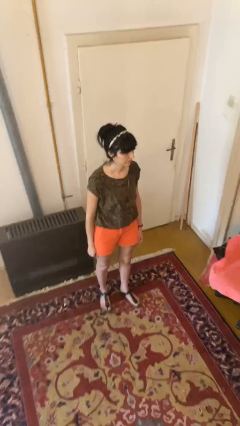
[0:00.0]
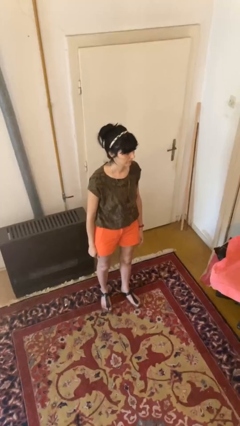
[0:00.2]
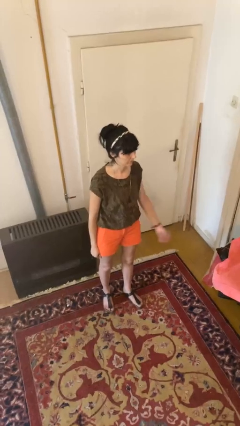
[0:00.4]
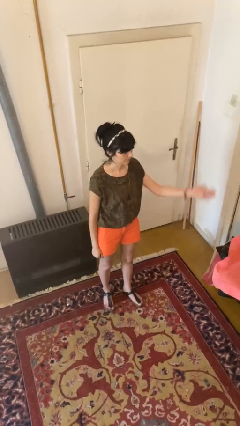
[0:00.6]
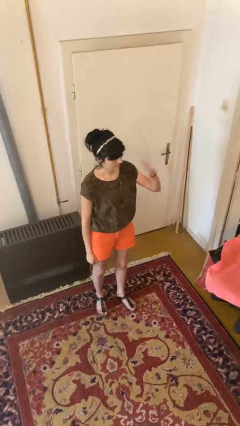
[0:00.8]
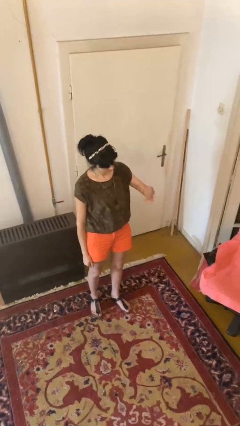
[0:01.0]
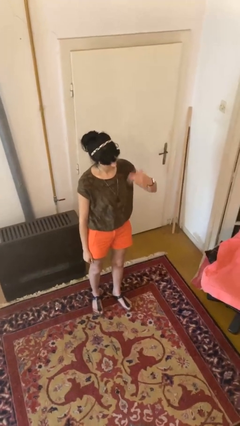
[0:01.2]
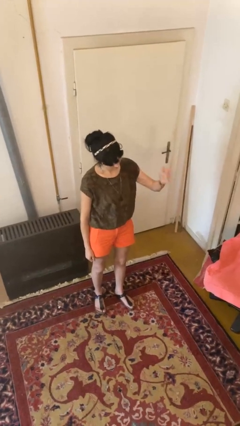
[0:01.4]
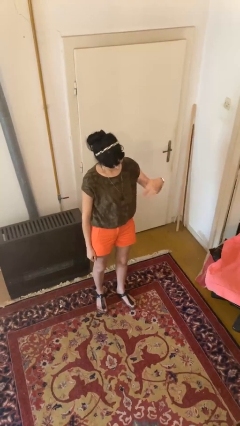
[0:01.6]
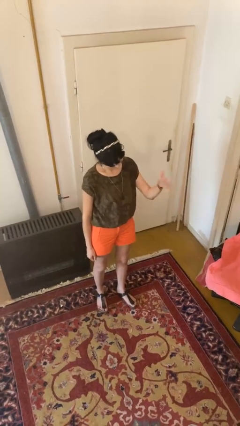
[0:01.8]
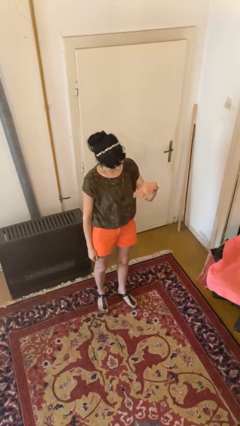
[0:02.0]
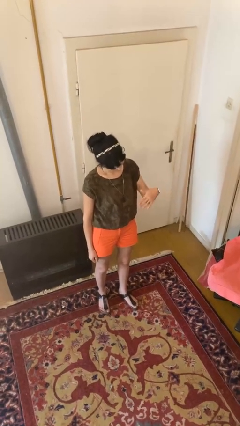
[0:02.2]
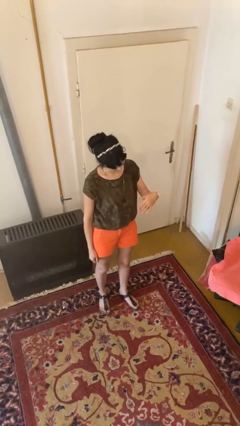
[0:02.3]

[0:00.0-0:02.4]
person gestures come here

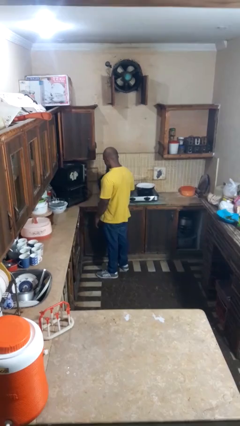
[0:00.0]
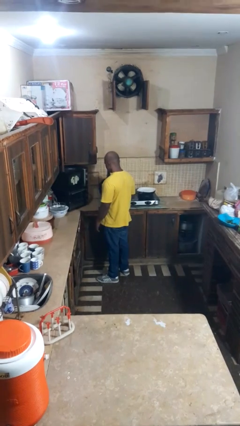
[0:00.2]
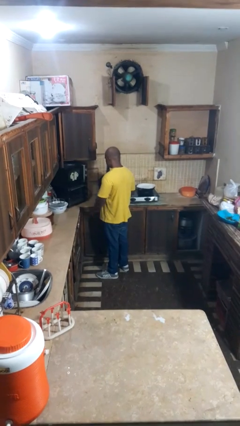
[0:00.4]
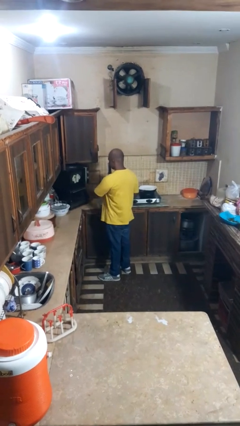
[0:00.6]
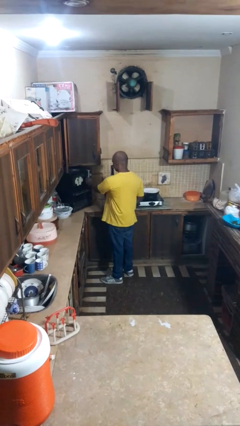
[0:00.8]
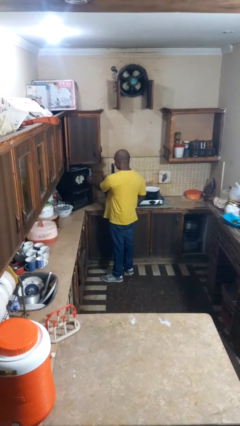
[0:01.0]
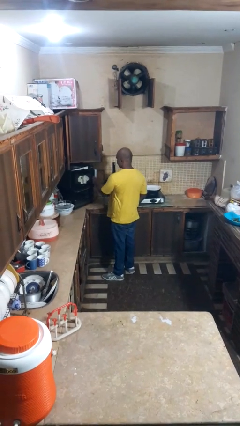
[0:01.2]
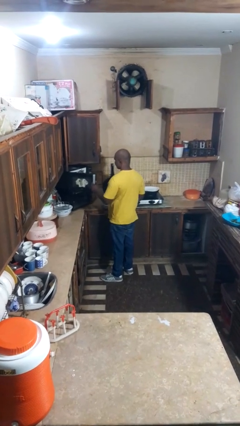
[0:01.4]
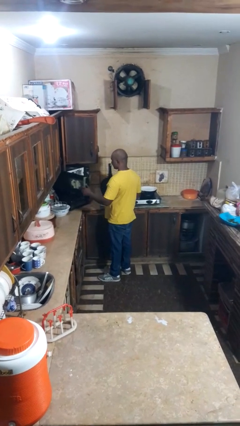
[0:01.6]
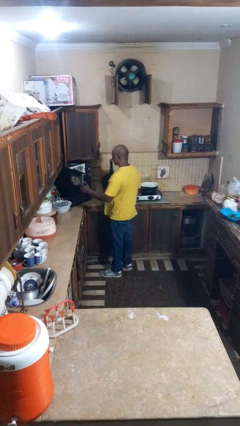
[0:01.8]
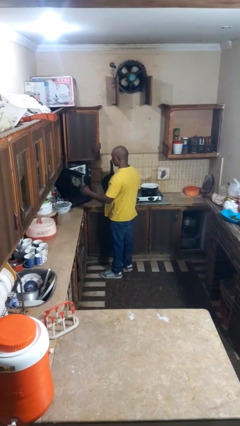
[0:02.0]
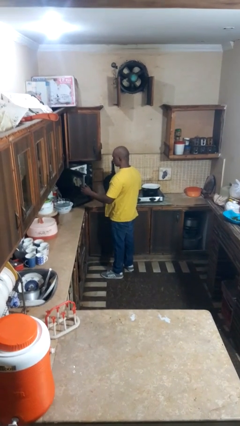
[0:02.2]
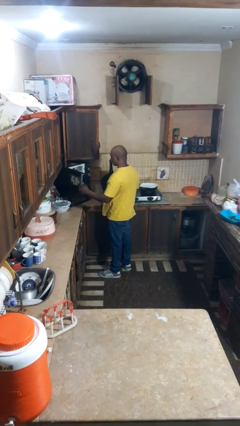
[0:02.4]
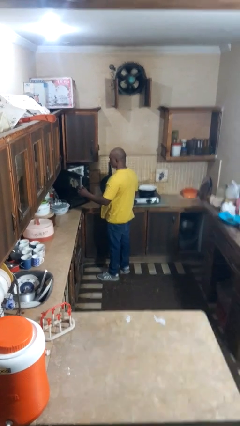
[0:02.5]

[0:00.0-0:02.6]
person opens microwave

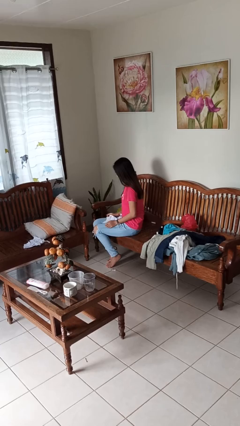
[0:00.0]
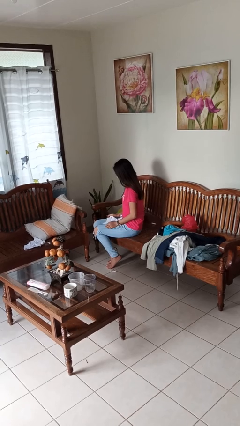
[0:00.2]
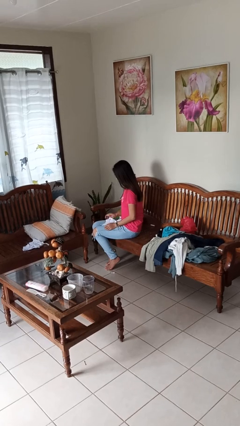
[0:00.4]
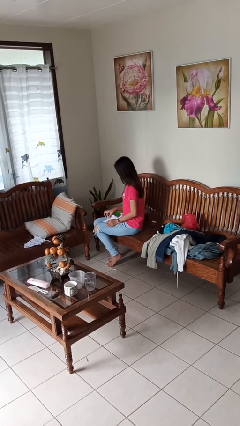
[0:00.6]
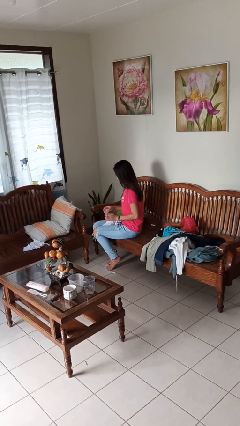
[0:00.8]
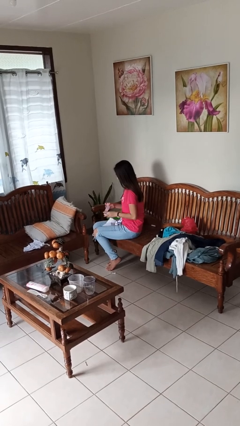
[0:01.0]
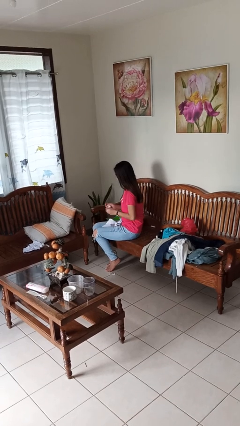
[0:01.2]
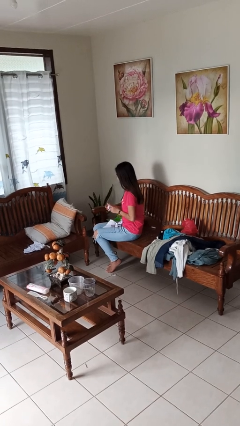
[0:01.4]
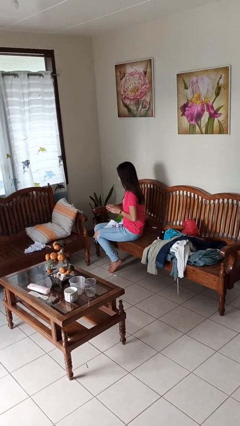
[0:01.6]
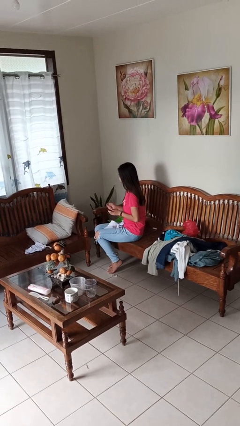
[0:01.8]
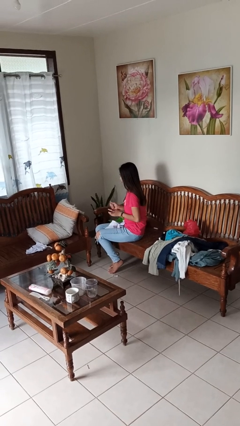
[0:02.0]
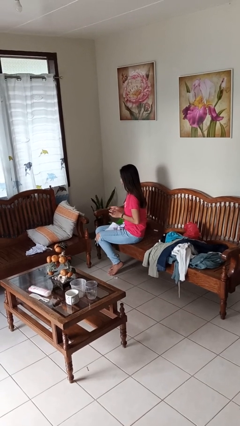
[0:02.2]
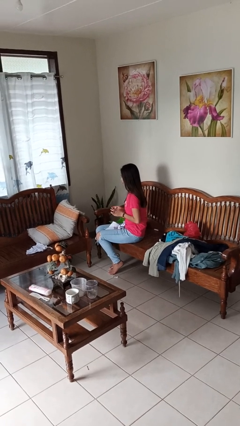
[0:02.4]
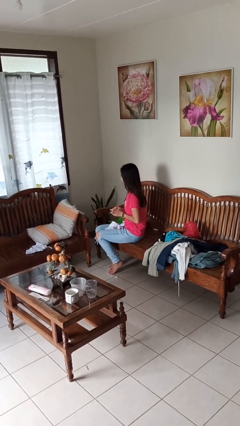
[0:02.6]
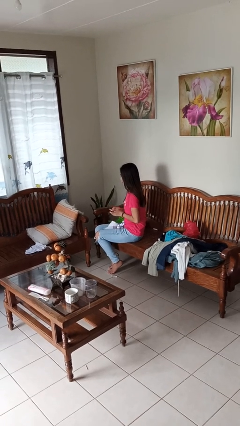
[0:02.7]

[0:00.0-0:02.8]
person crumples paper

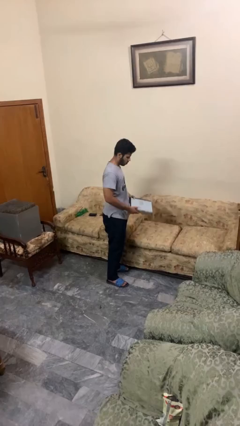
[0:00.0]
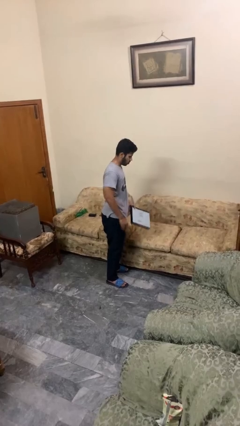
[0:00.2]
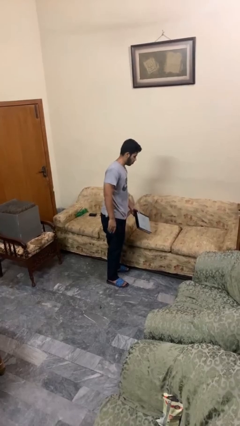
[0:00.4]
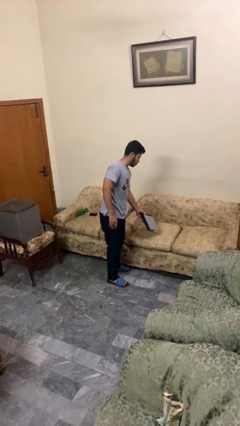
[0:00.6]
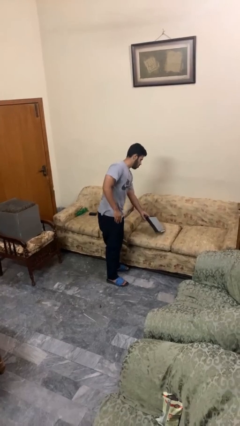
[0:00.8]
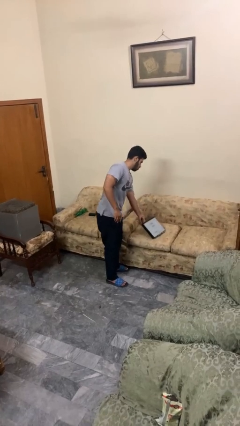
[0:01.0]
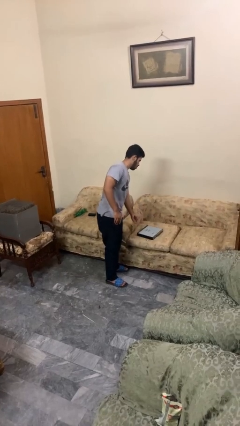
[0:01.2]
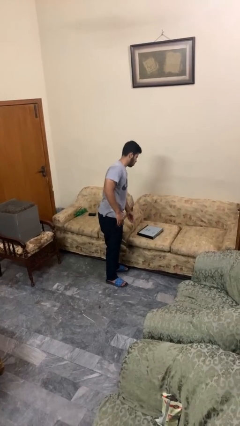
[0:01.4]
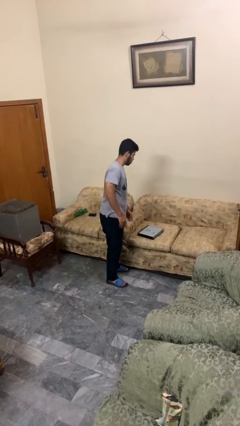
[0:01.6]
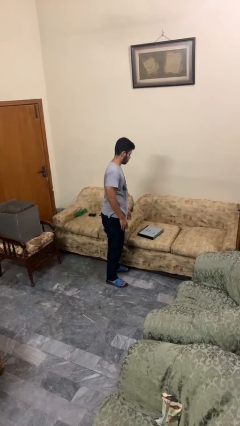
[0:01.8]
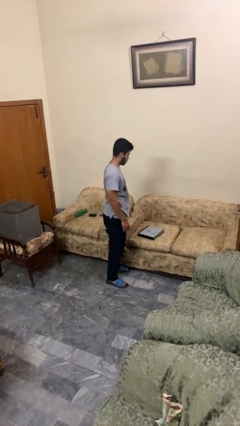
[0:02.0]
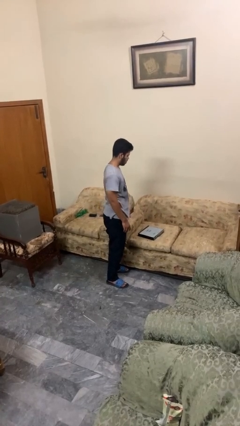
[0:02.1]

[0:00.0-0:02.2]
person puts down object on couch

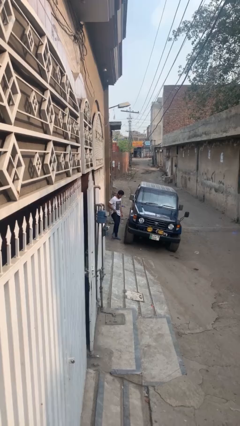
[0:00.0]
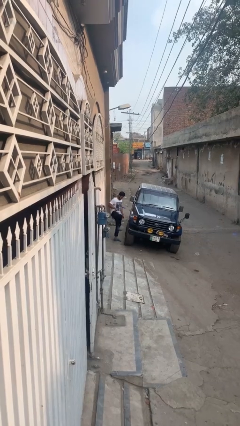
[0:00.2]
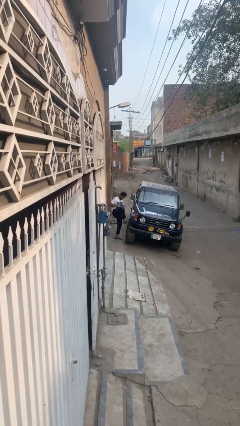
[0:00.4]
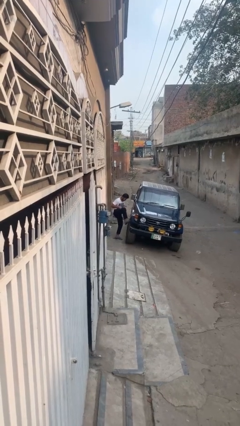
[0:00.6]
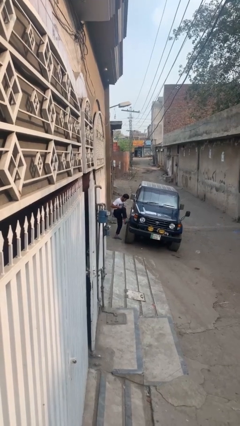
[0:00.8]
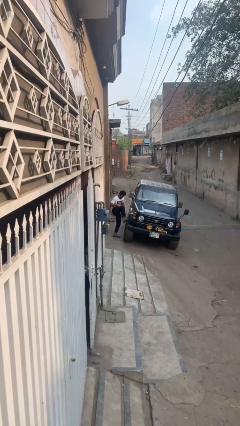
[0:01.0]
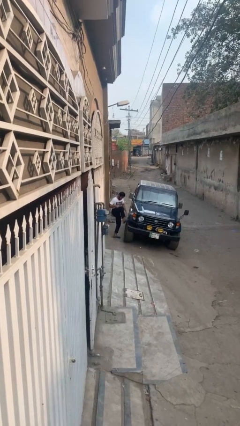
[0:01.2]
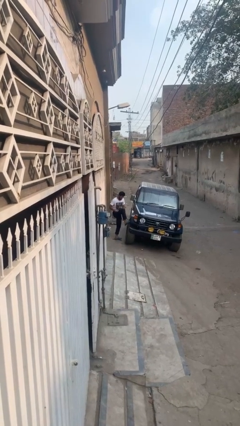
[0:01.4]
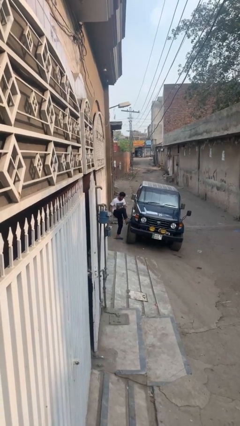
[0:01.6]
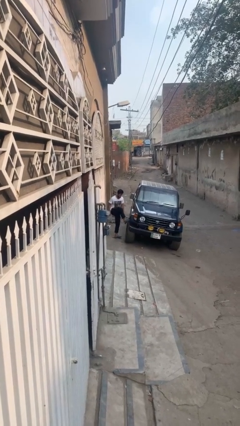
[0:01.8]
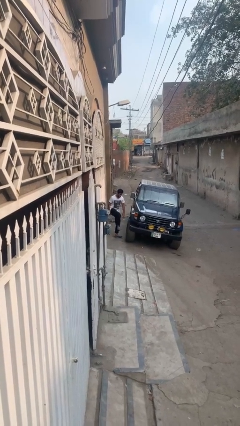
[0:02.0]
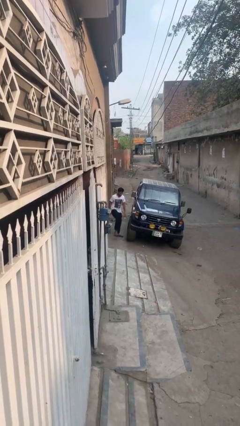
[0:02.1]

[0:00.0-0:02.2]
person kicks car tires

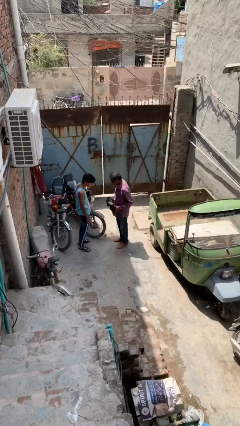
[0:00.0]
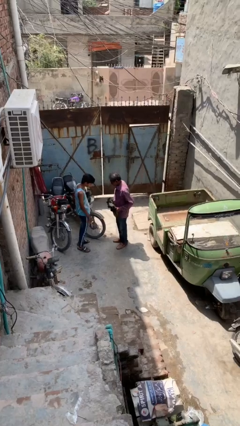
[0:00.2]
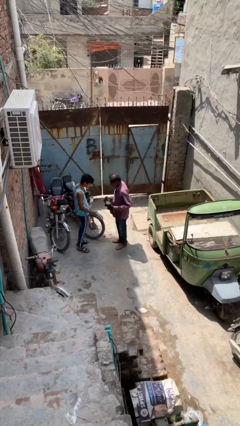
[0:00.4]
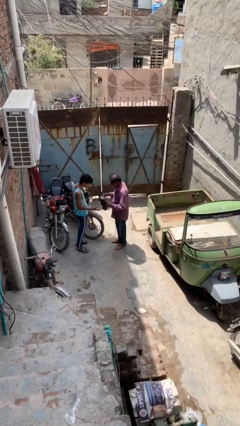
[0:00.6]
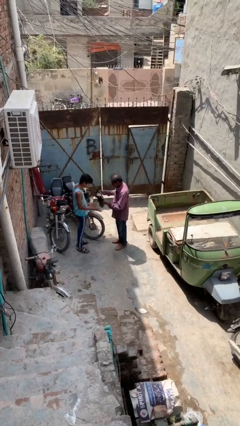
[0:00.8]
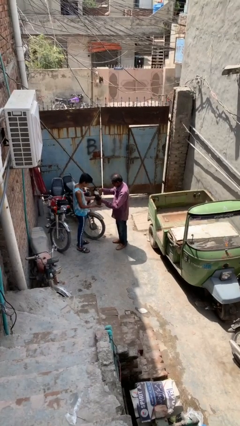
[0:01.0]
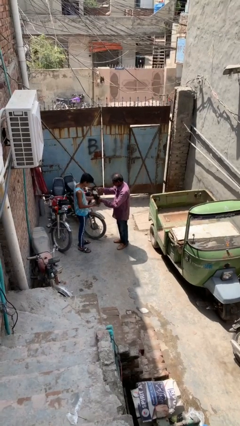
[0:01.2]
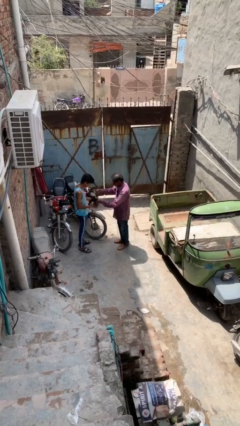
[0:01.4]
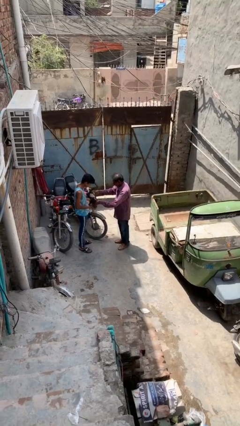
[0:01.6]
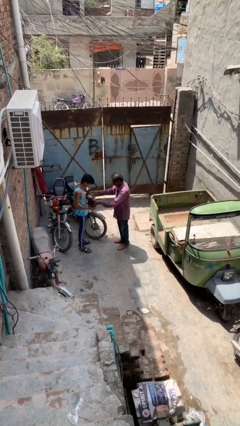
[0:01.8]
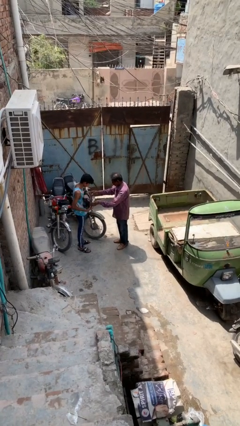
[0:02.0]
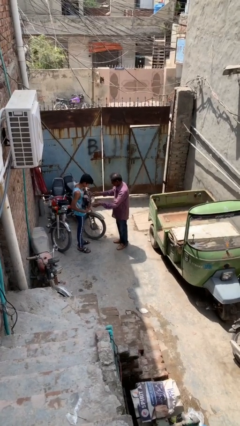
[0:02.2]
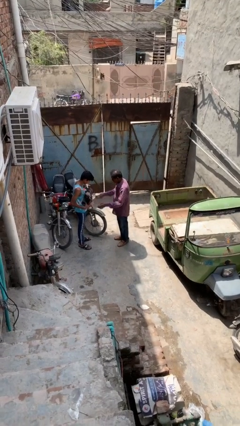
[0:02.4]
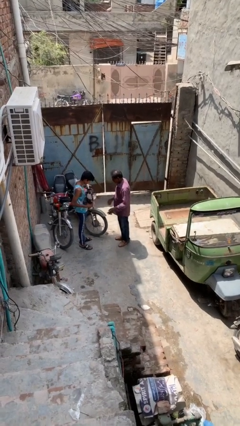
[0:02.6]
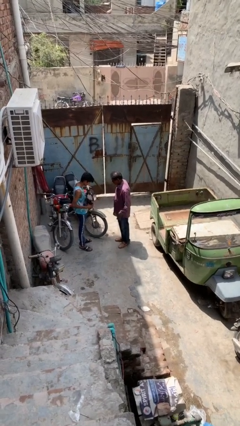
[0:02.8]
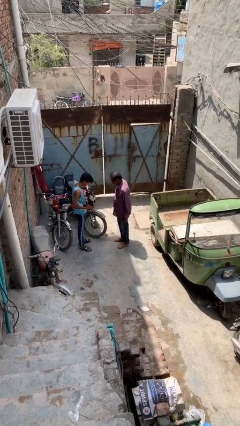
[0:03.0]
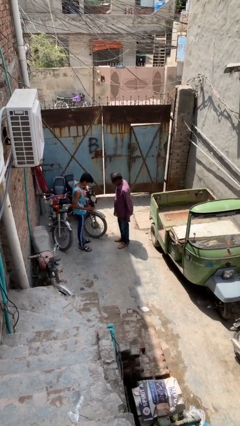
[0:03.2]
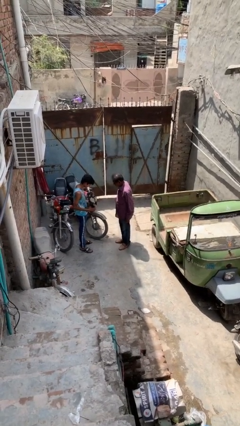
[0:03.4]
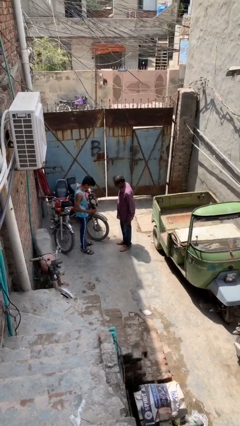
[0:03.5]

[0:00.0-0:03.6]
person transfers object to person

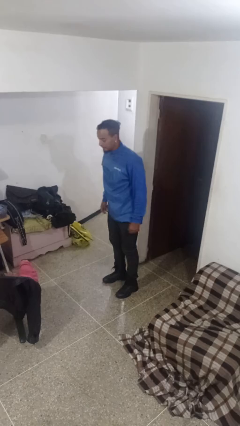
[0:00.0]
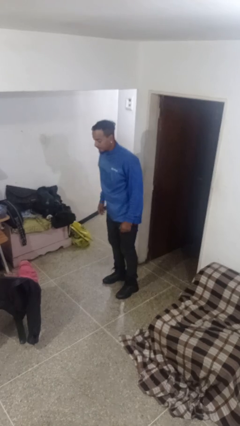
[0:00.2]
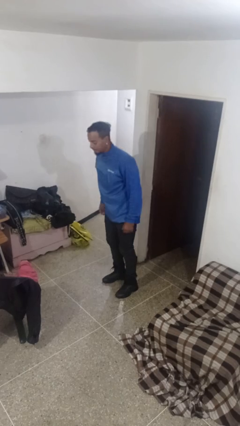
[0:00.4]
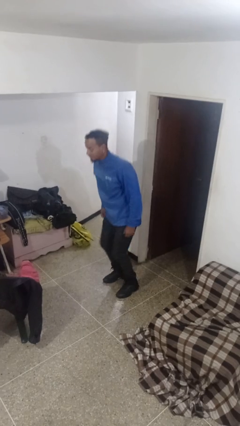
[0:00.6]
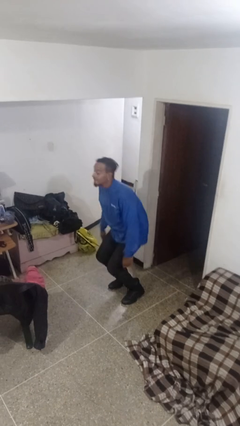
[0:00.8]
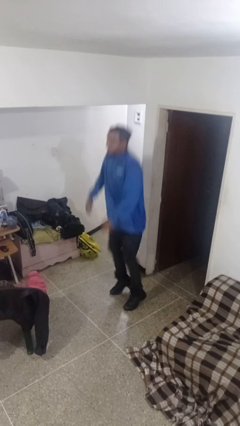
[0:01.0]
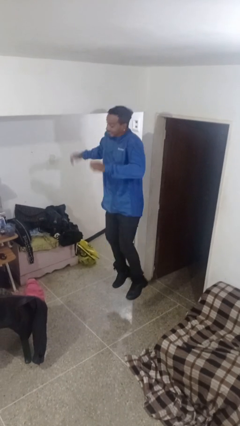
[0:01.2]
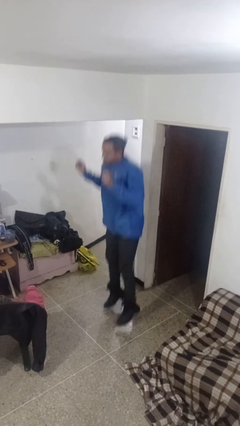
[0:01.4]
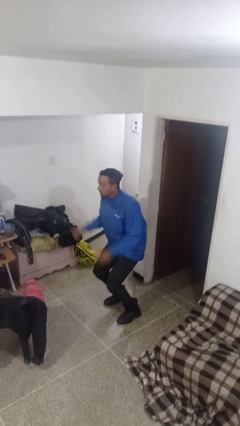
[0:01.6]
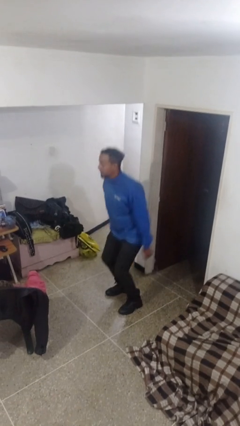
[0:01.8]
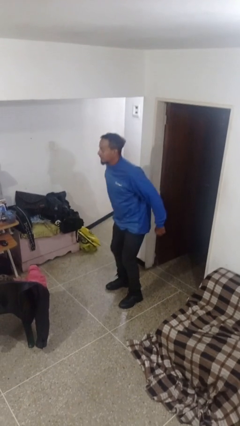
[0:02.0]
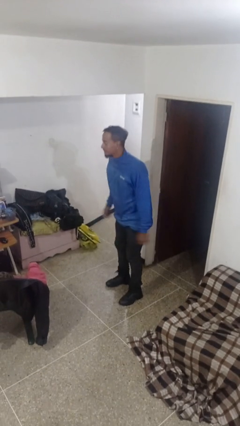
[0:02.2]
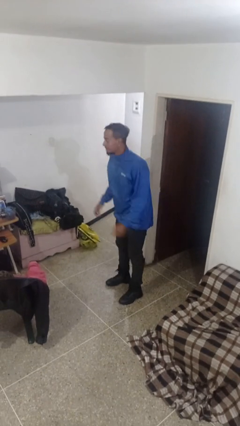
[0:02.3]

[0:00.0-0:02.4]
person jumps
